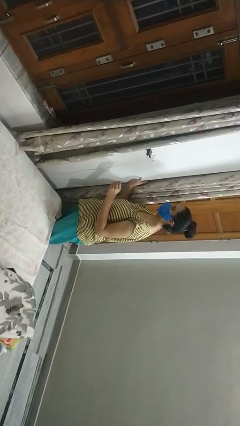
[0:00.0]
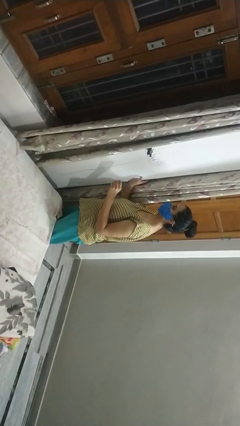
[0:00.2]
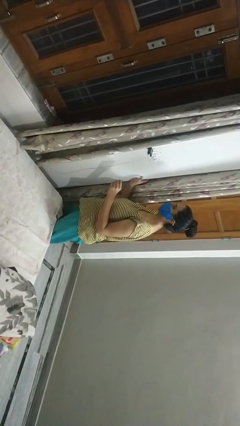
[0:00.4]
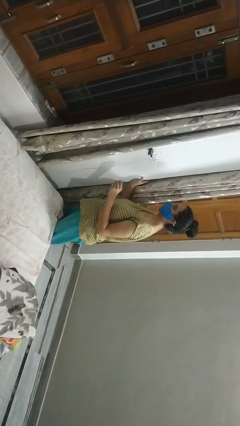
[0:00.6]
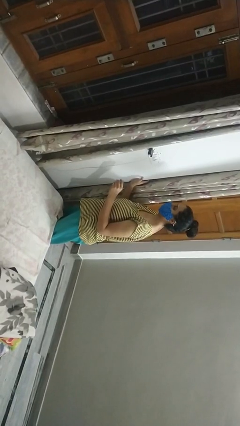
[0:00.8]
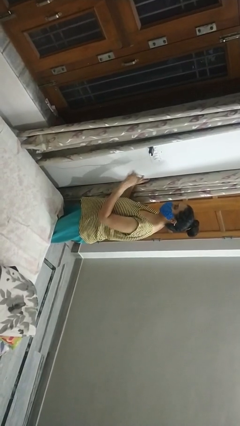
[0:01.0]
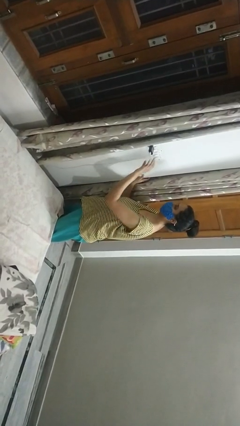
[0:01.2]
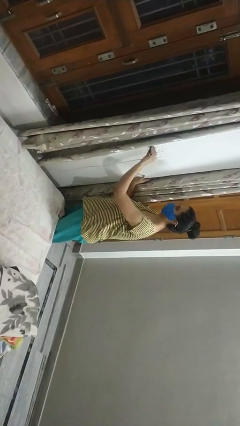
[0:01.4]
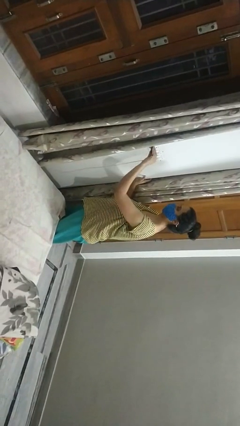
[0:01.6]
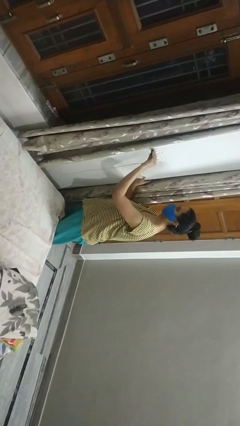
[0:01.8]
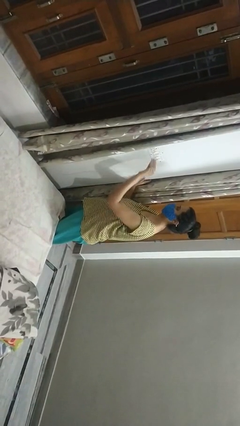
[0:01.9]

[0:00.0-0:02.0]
person unplugs from electrical socket

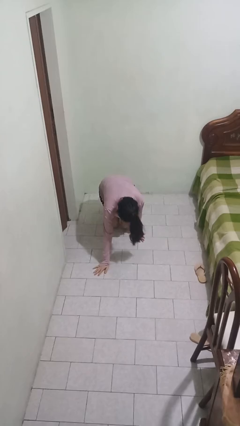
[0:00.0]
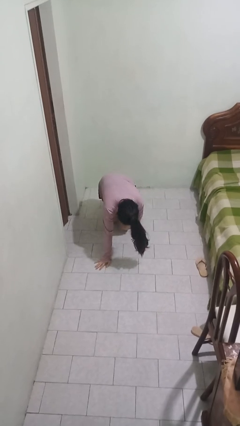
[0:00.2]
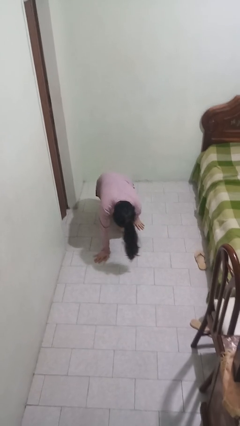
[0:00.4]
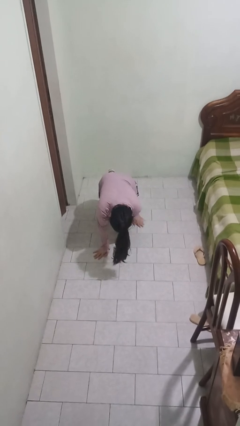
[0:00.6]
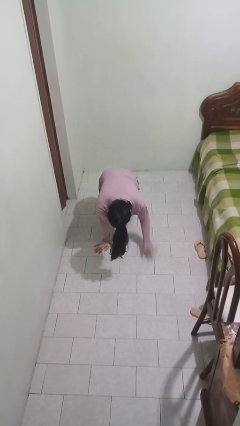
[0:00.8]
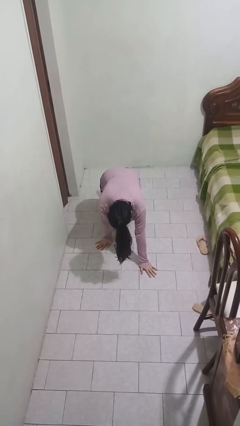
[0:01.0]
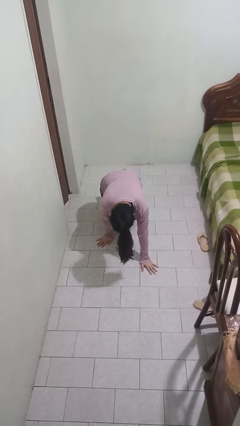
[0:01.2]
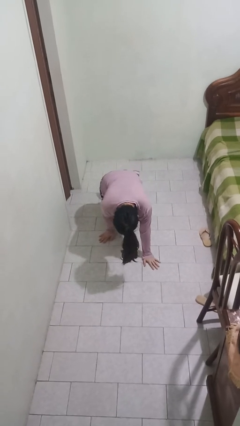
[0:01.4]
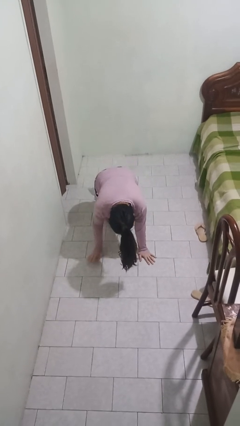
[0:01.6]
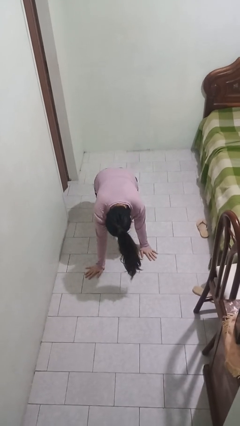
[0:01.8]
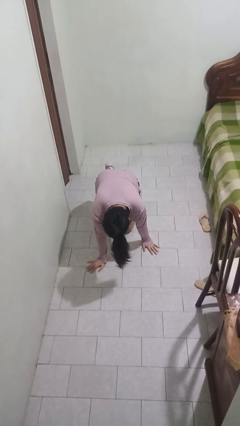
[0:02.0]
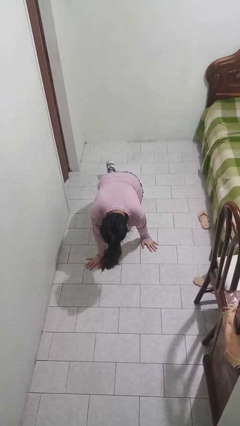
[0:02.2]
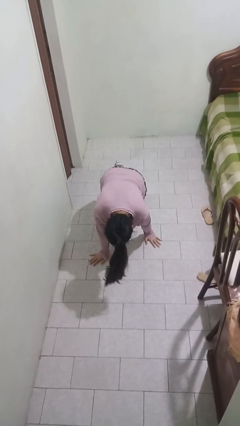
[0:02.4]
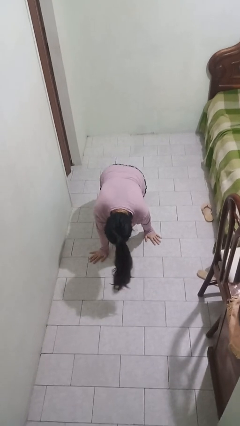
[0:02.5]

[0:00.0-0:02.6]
person crawls

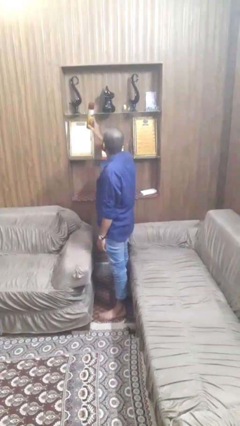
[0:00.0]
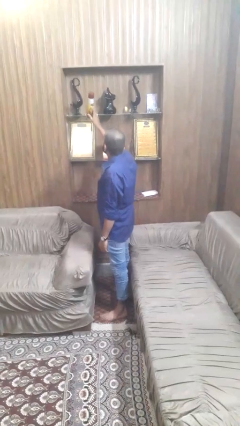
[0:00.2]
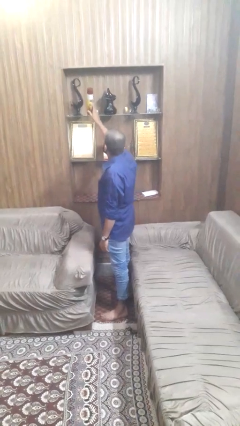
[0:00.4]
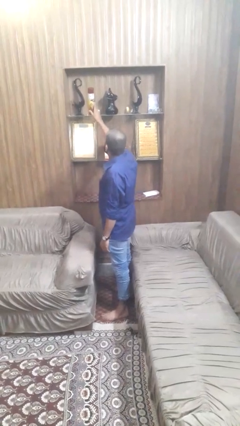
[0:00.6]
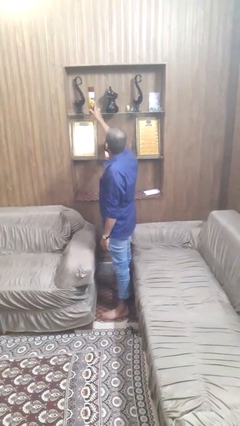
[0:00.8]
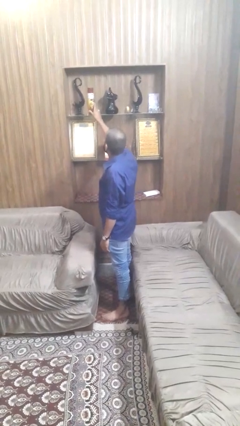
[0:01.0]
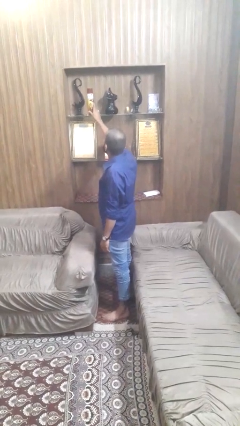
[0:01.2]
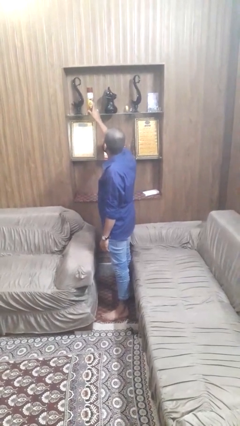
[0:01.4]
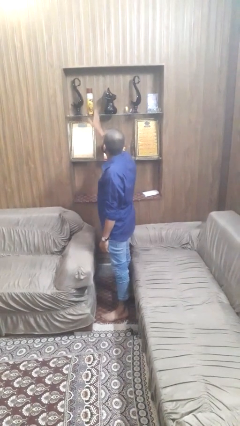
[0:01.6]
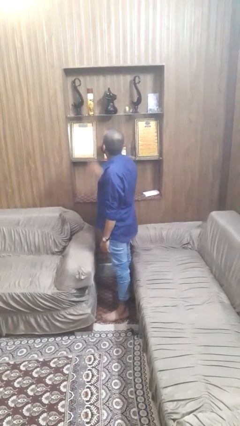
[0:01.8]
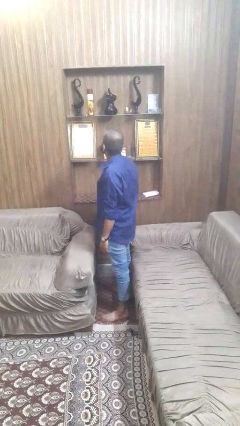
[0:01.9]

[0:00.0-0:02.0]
person puts down object on shelf

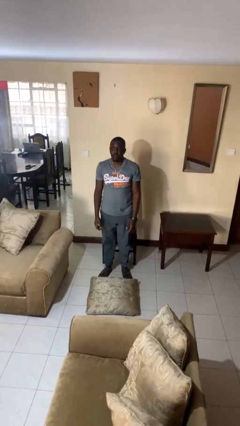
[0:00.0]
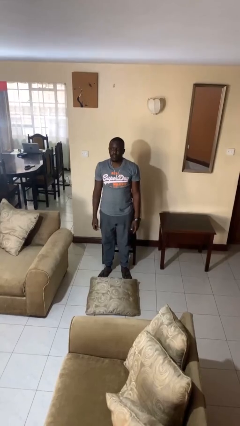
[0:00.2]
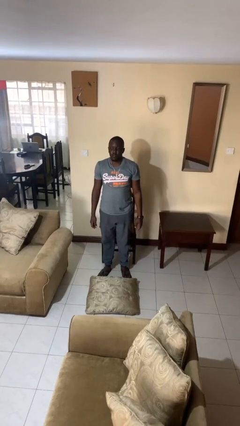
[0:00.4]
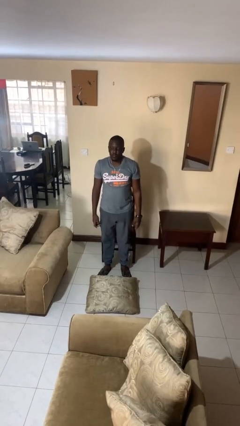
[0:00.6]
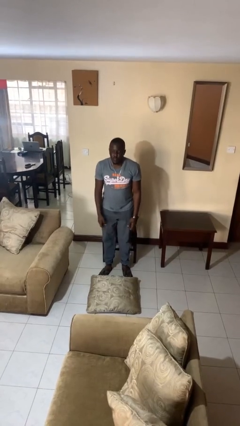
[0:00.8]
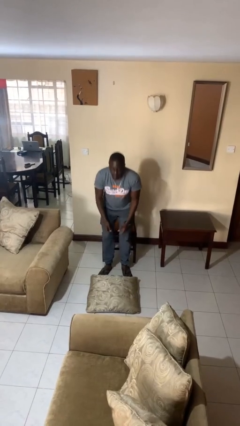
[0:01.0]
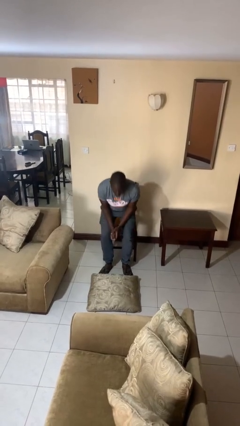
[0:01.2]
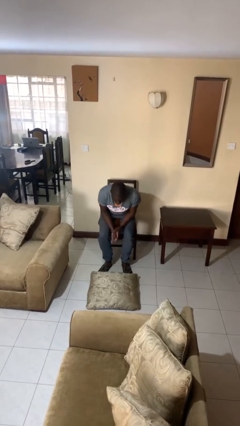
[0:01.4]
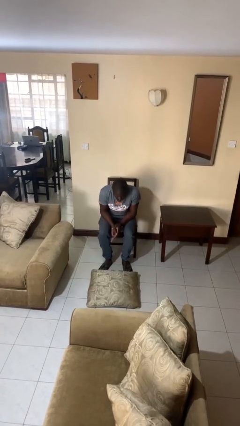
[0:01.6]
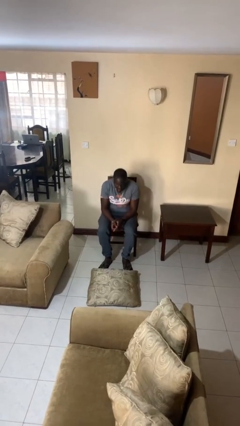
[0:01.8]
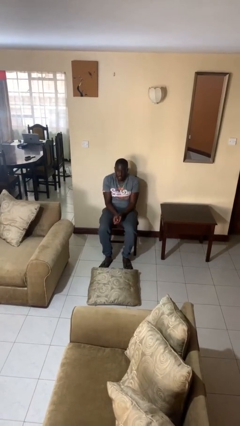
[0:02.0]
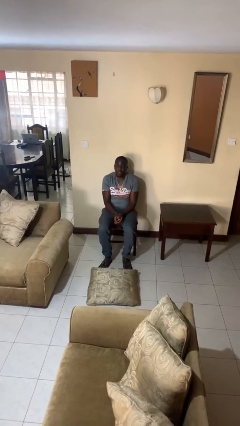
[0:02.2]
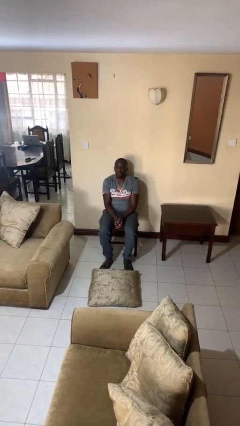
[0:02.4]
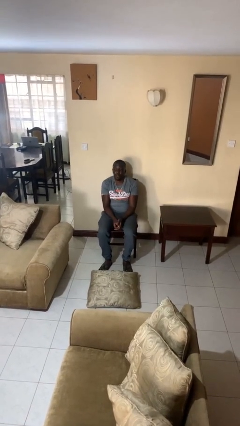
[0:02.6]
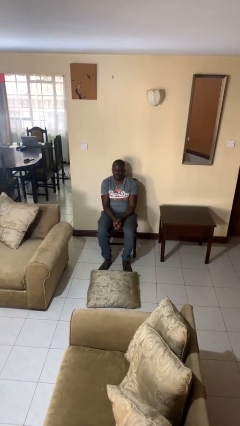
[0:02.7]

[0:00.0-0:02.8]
person sits down

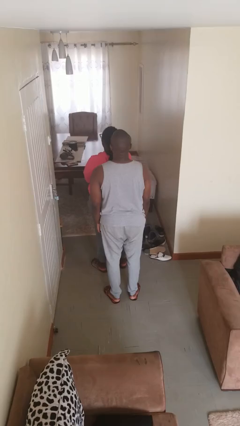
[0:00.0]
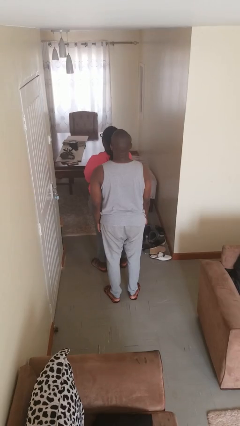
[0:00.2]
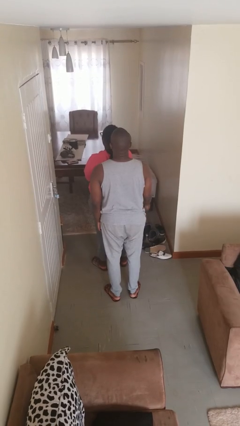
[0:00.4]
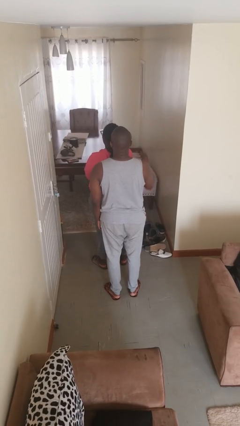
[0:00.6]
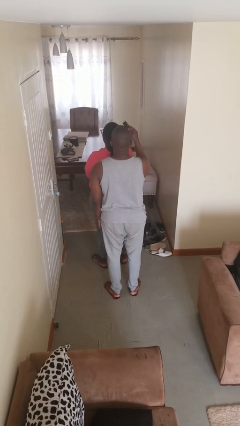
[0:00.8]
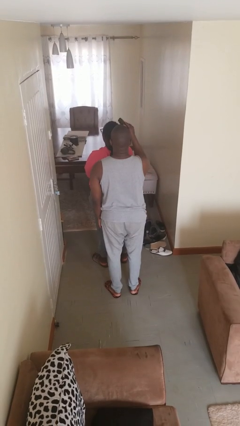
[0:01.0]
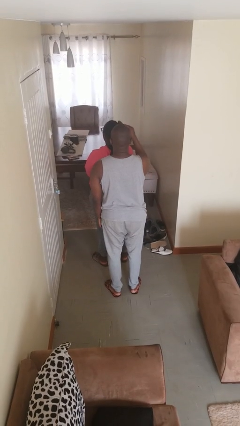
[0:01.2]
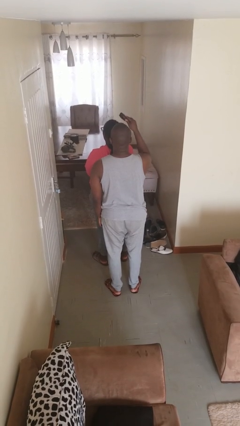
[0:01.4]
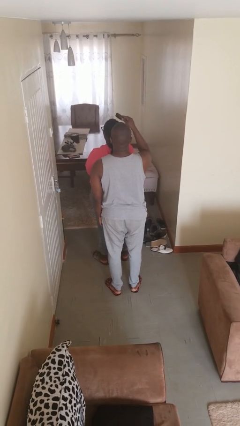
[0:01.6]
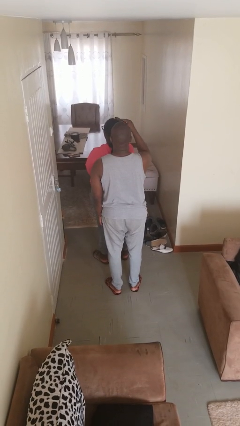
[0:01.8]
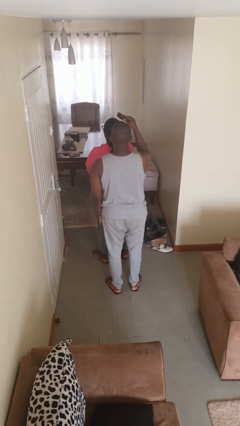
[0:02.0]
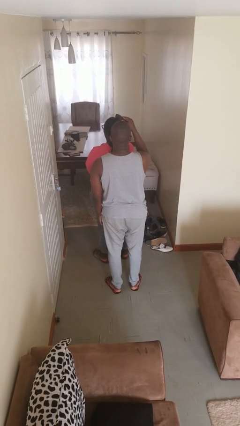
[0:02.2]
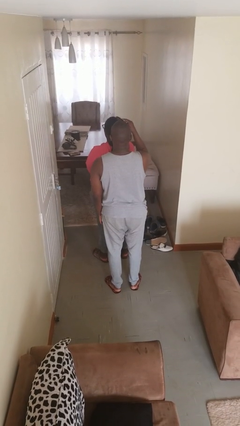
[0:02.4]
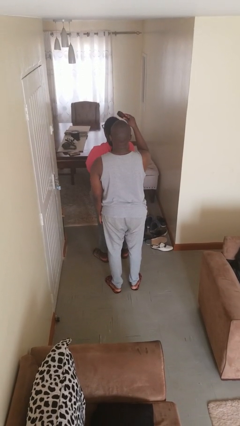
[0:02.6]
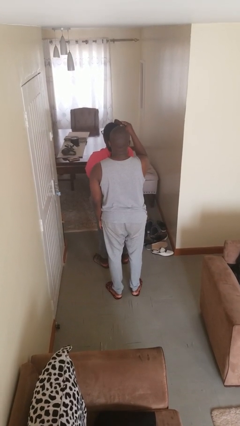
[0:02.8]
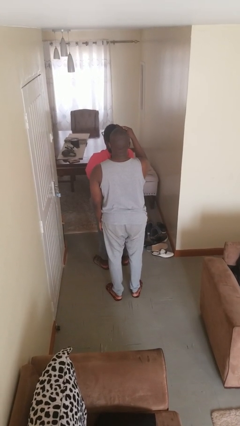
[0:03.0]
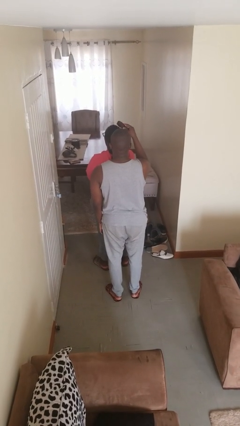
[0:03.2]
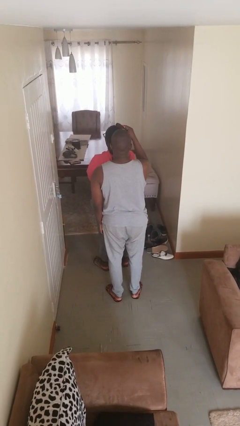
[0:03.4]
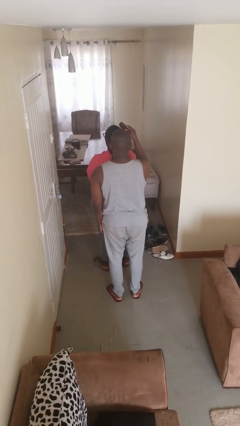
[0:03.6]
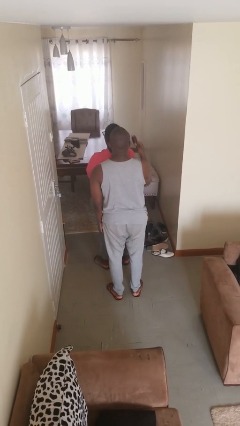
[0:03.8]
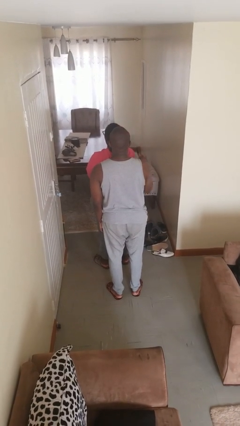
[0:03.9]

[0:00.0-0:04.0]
person brushes hair of person

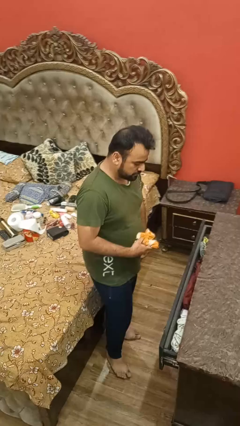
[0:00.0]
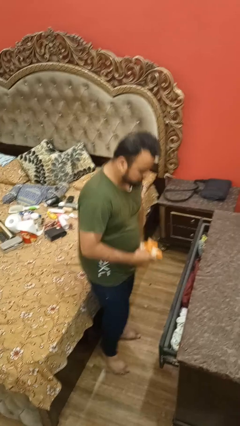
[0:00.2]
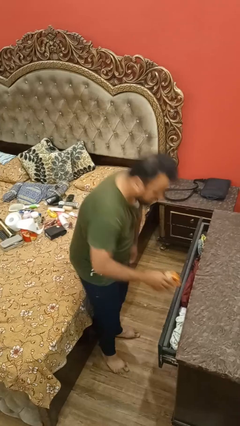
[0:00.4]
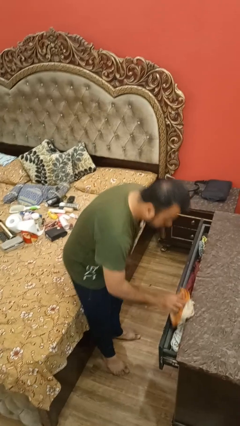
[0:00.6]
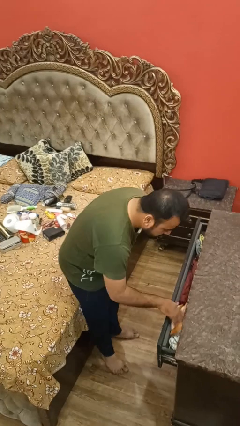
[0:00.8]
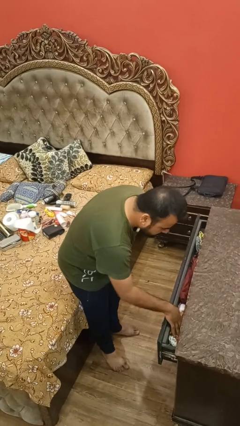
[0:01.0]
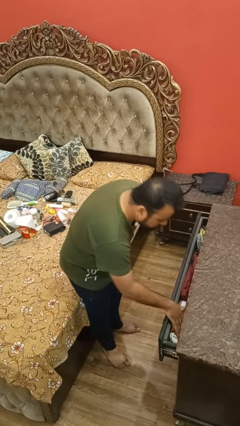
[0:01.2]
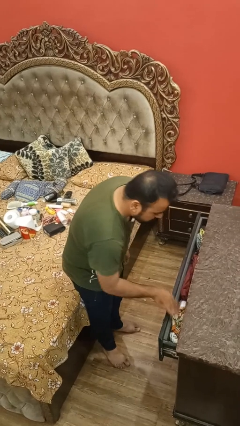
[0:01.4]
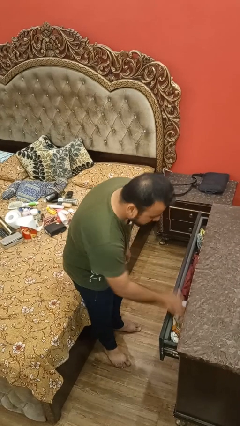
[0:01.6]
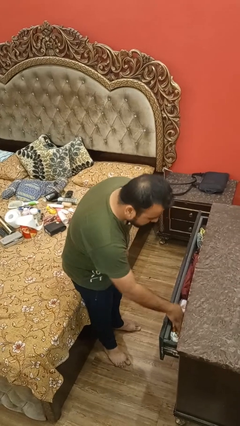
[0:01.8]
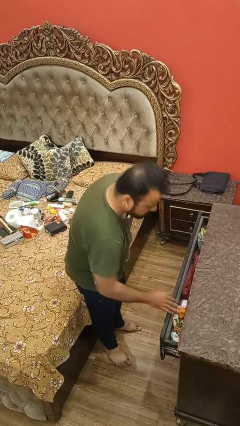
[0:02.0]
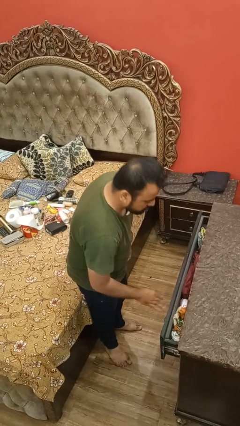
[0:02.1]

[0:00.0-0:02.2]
person puts clothes into dresser

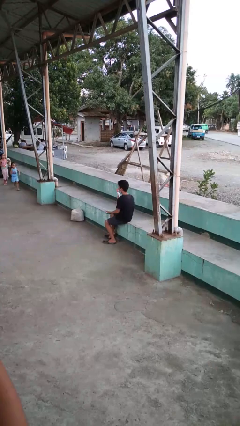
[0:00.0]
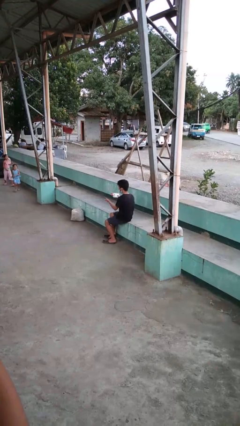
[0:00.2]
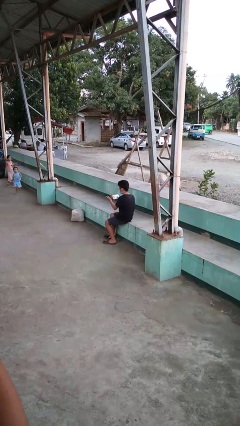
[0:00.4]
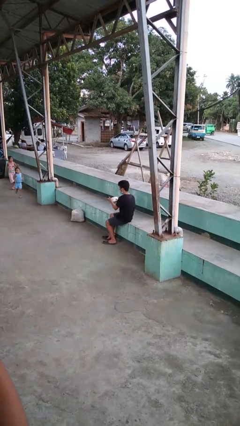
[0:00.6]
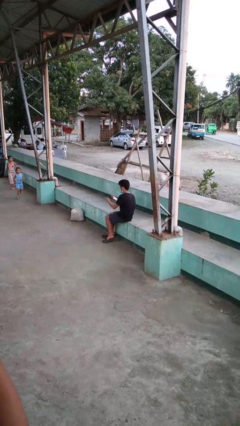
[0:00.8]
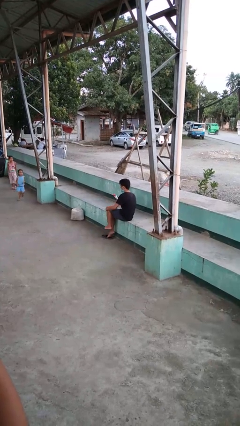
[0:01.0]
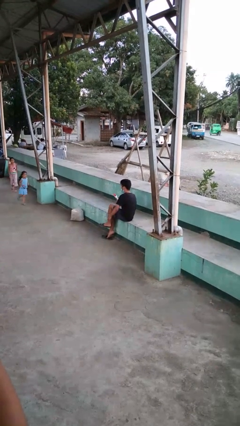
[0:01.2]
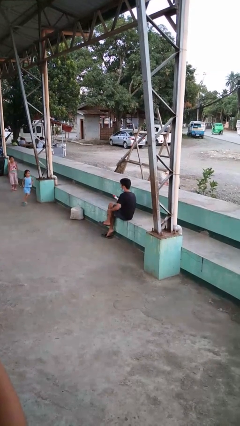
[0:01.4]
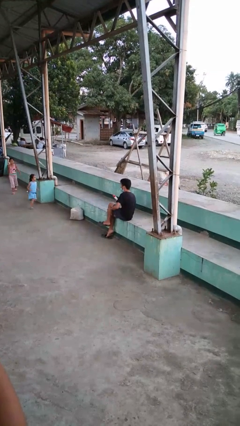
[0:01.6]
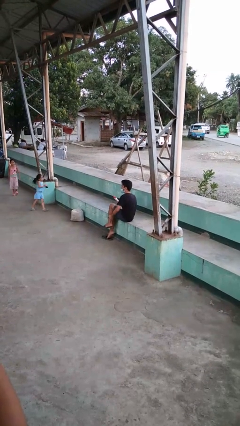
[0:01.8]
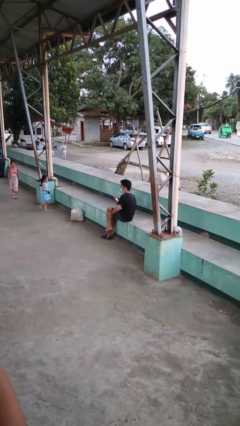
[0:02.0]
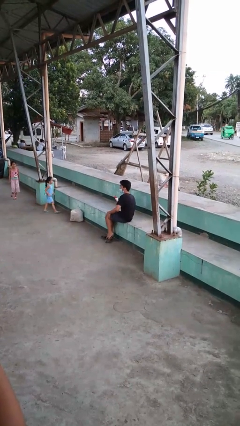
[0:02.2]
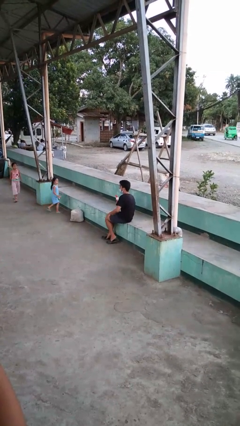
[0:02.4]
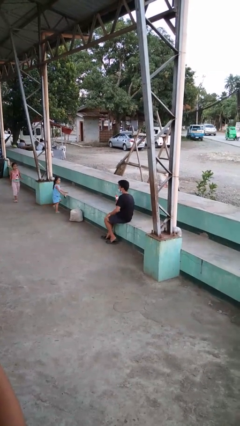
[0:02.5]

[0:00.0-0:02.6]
person applies sunscreen
